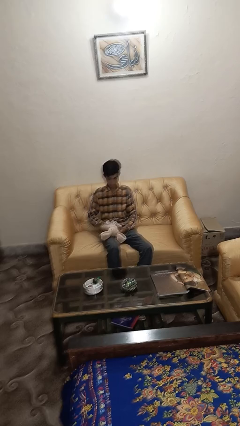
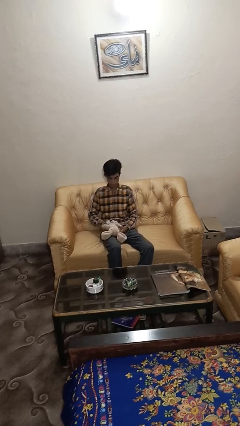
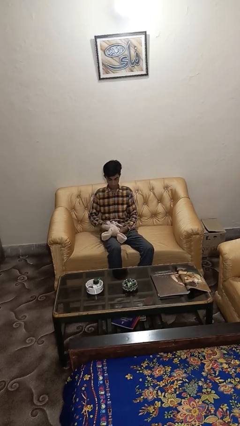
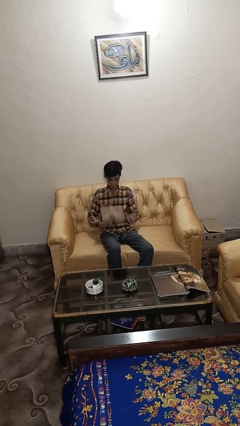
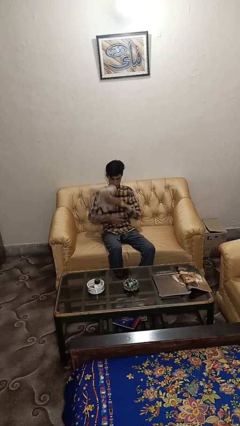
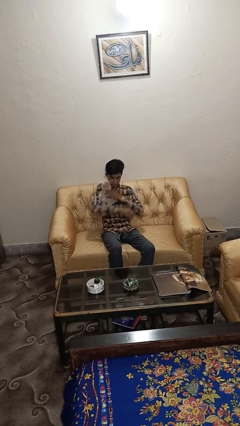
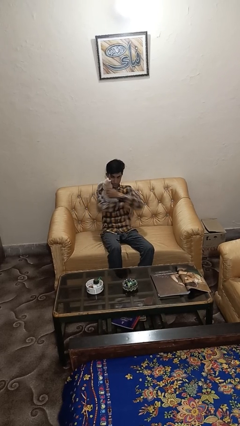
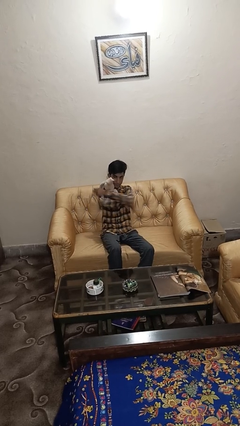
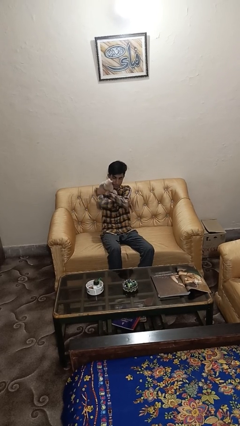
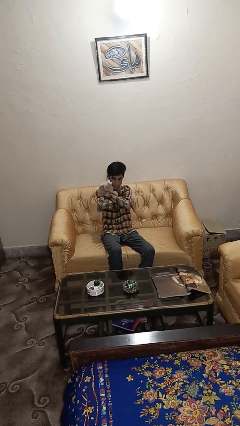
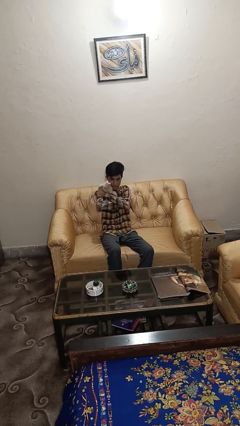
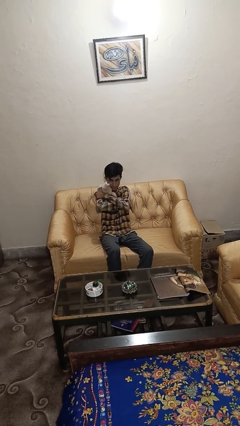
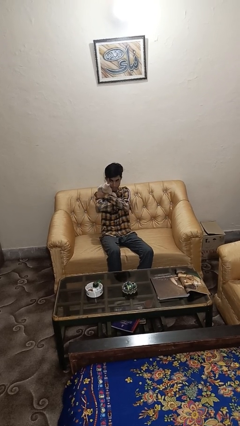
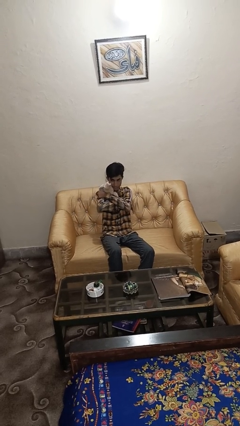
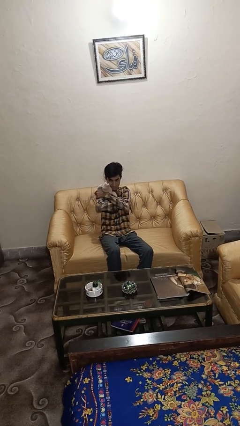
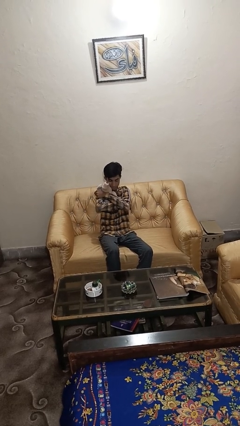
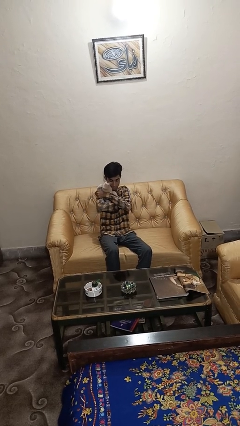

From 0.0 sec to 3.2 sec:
person hugs stuffed animal

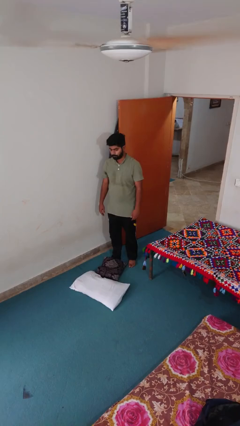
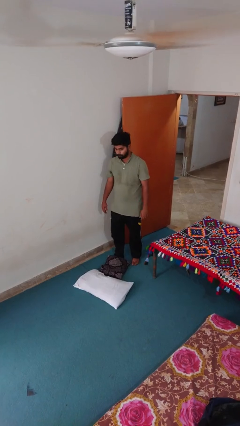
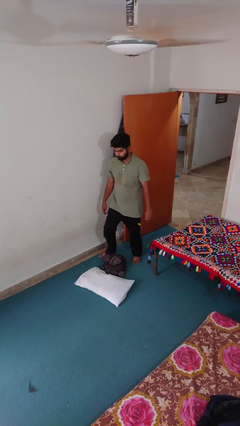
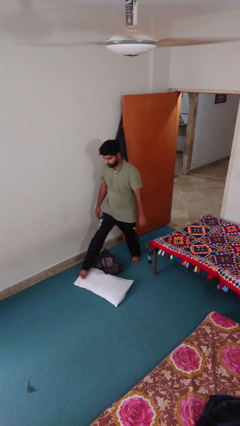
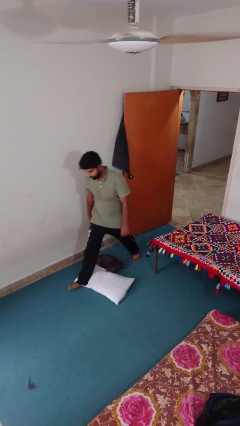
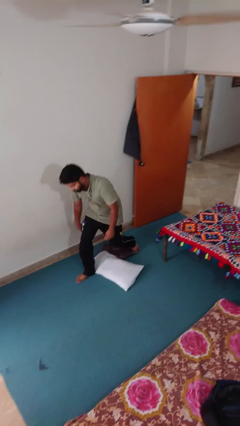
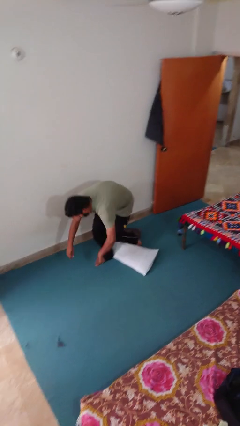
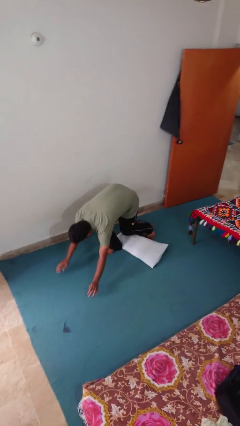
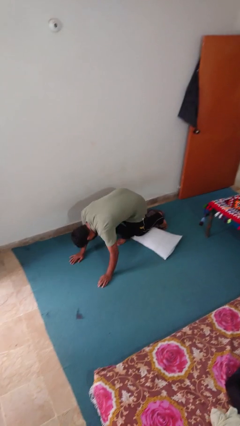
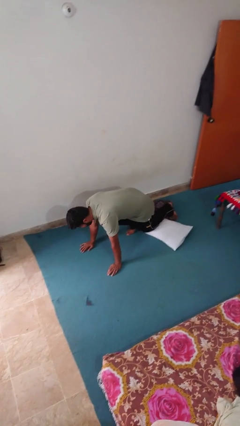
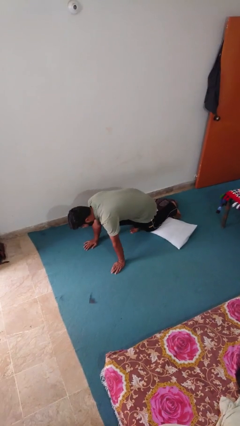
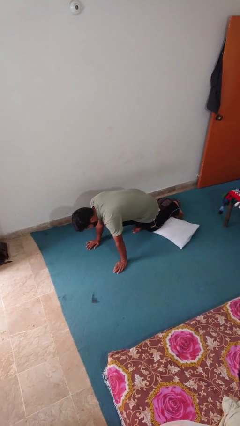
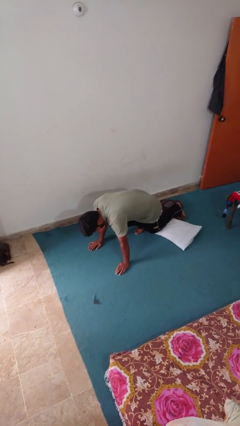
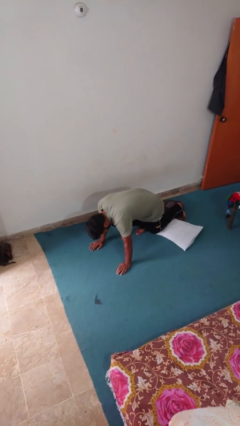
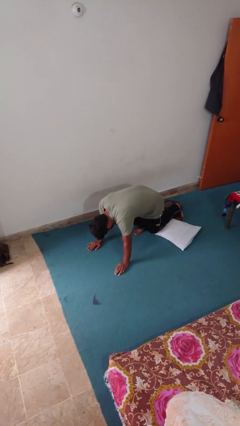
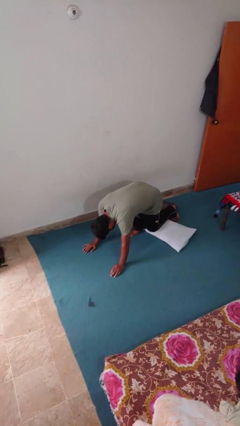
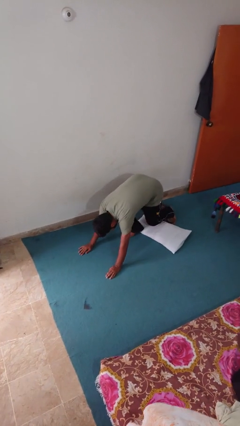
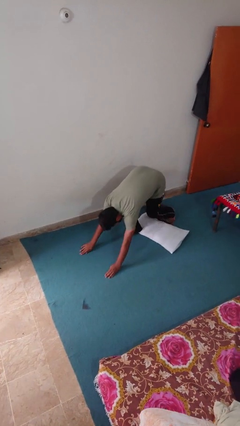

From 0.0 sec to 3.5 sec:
person trips on object on floor

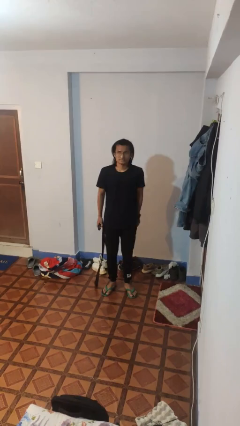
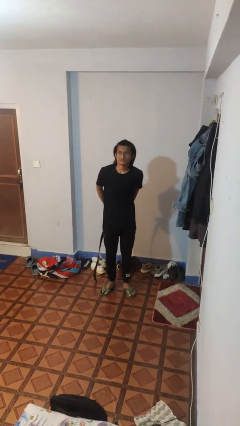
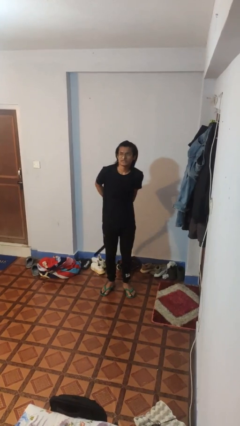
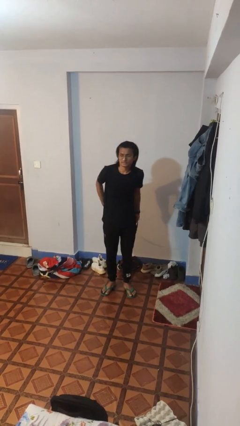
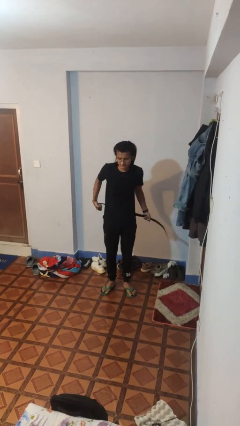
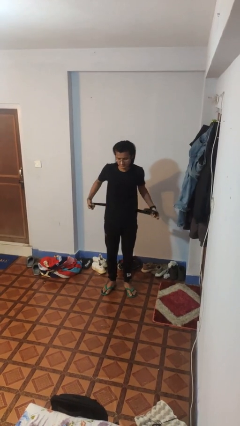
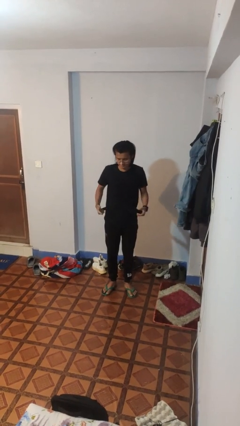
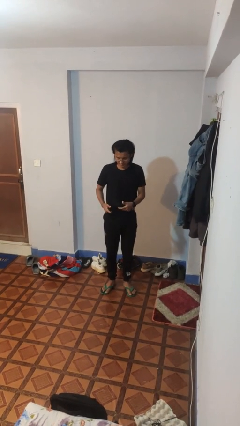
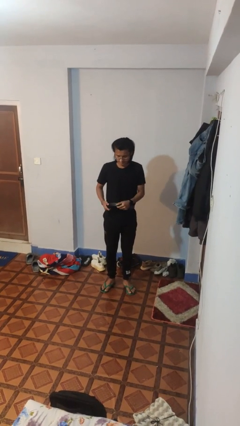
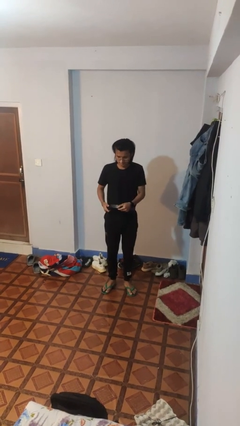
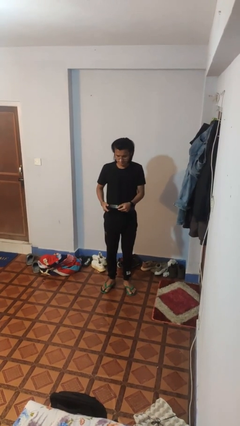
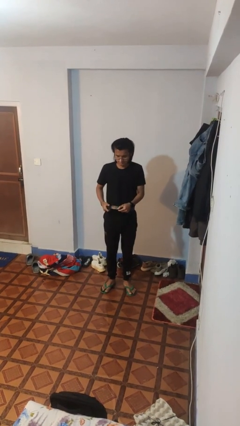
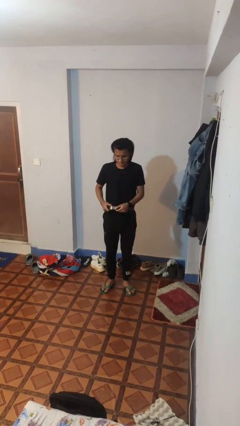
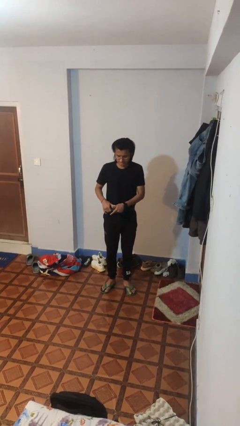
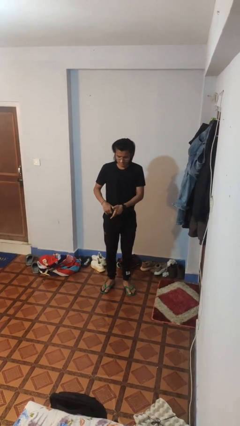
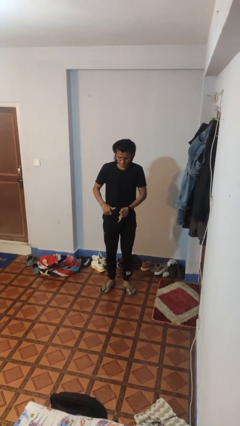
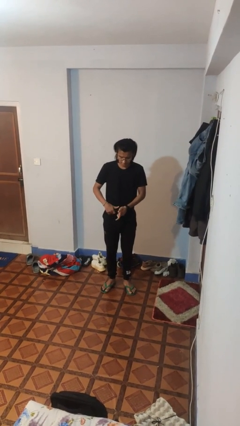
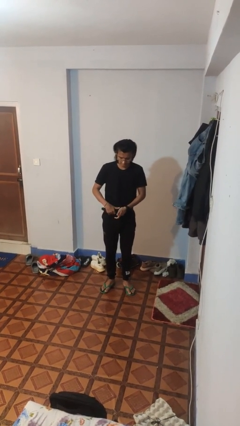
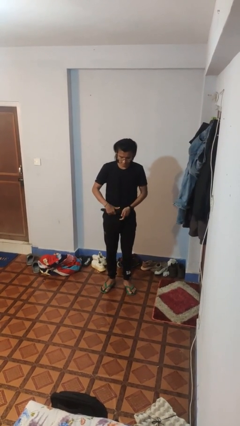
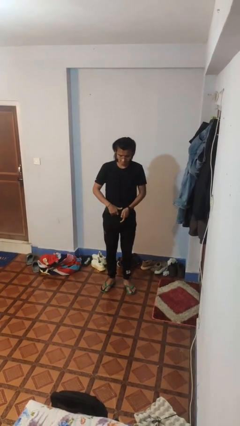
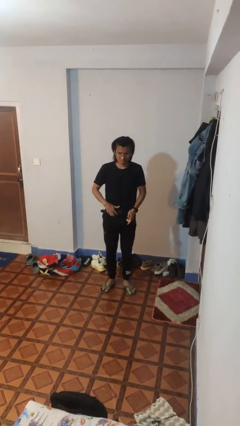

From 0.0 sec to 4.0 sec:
person puts on belt

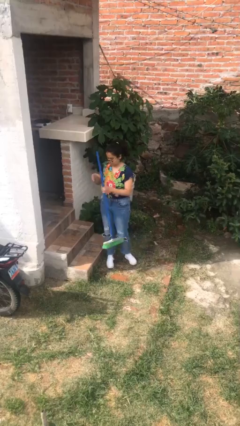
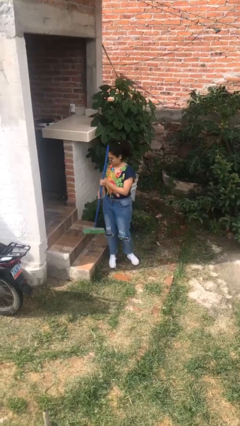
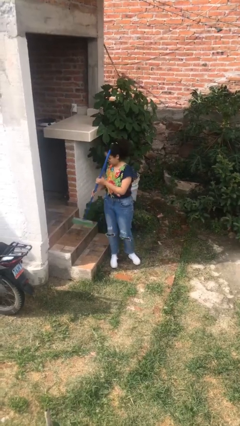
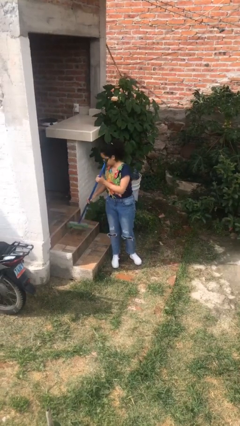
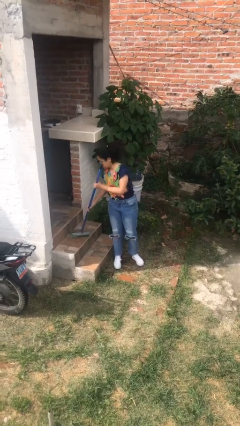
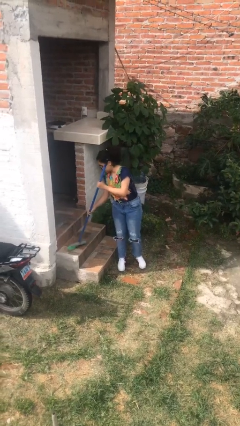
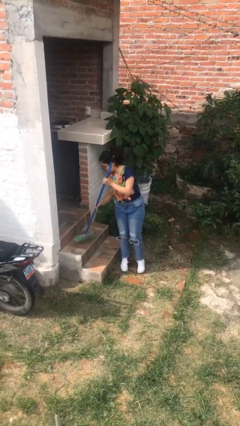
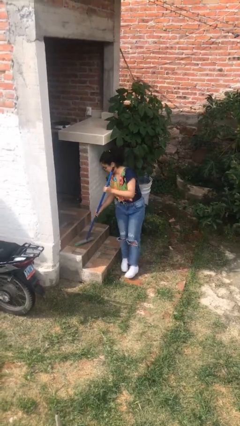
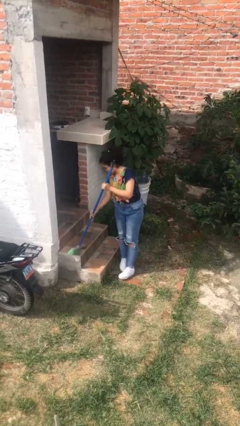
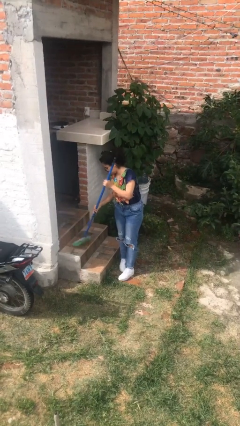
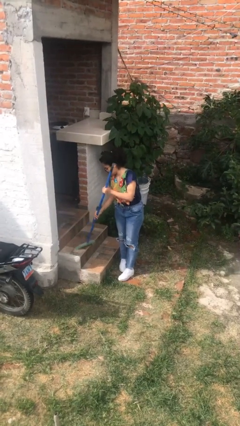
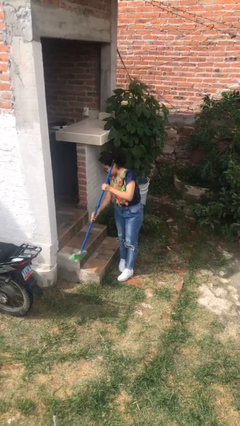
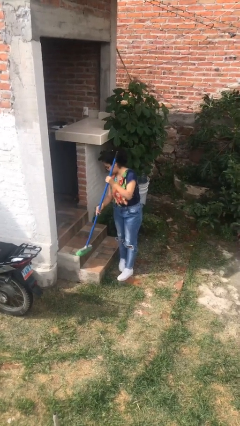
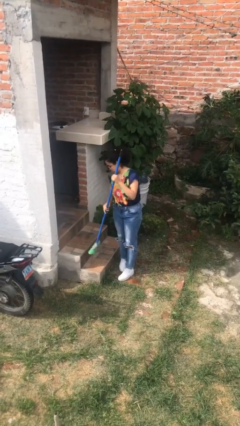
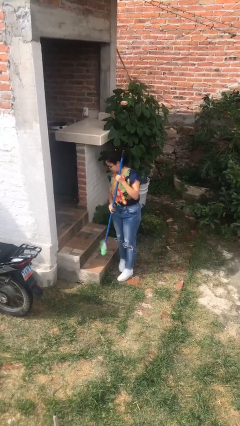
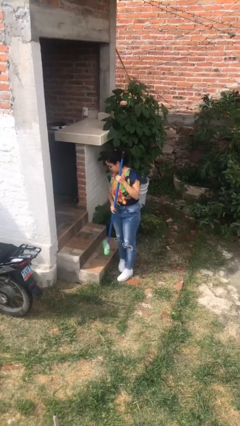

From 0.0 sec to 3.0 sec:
person sweeps floor

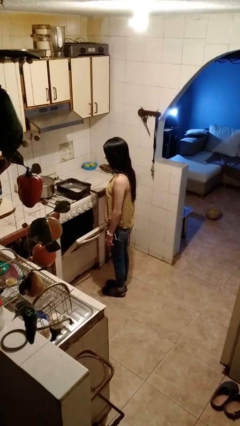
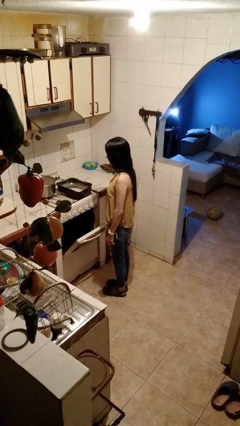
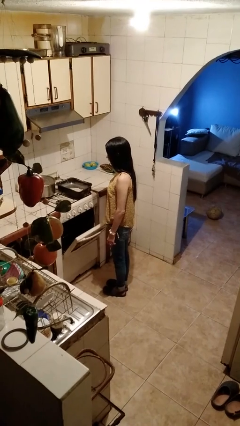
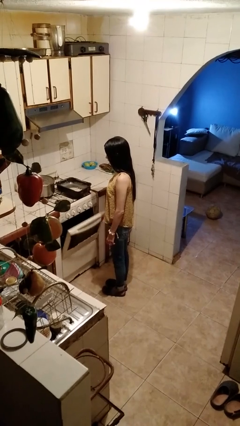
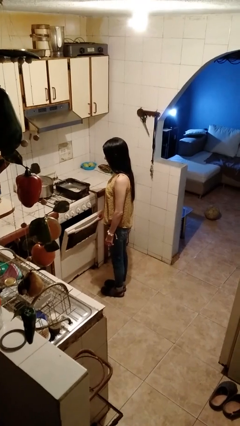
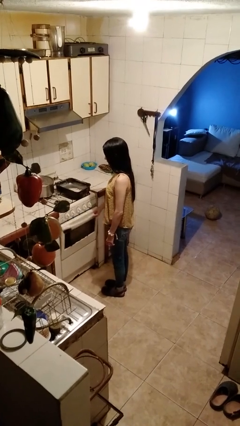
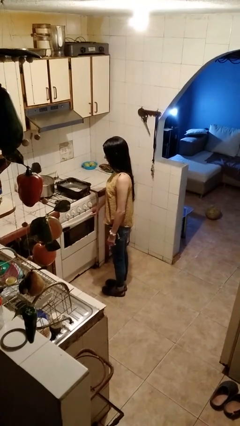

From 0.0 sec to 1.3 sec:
person closes oven door

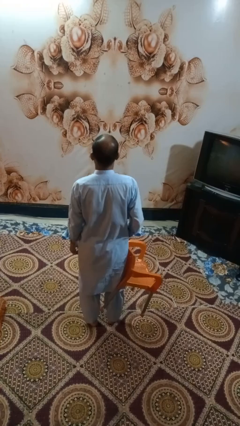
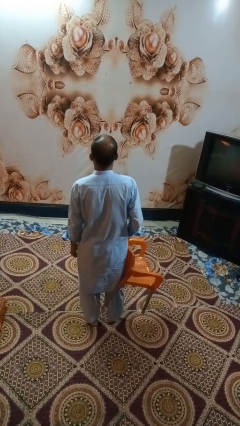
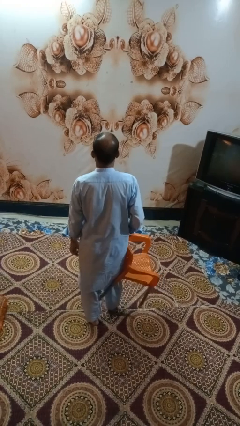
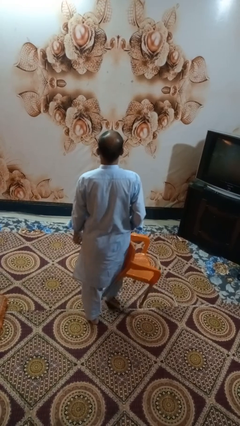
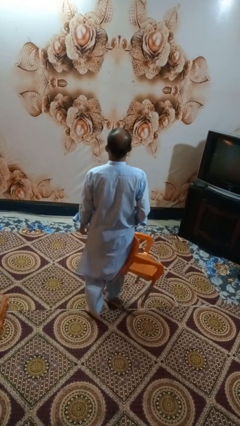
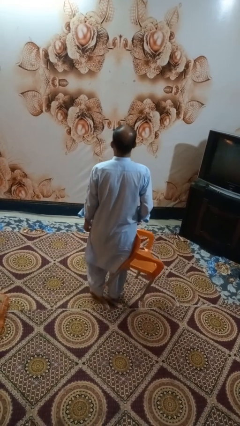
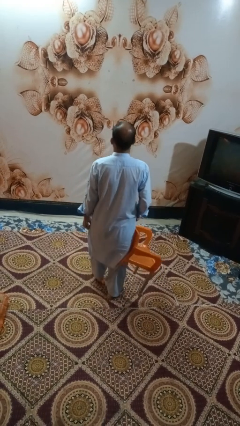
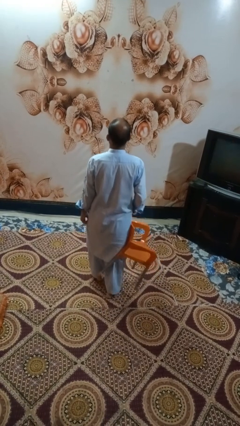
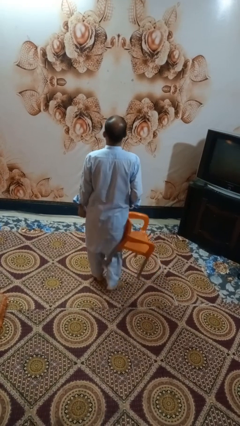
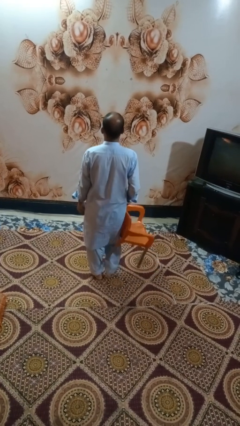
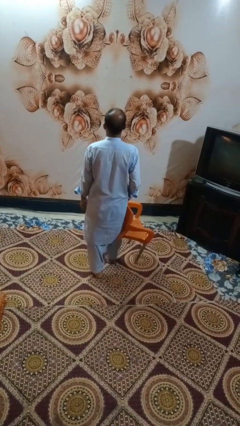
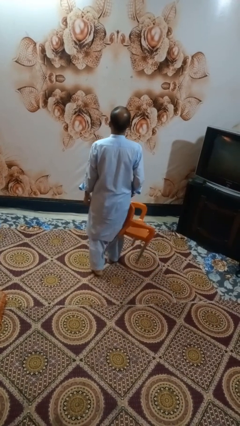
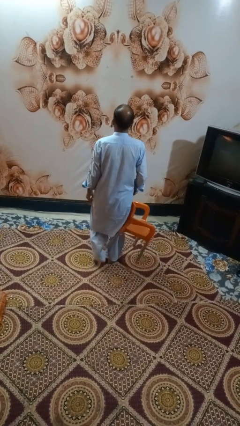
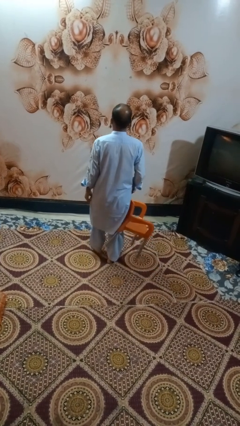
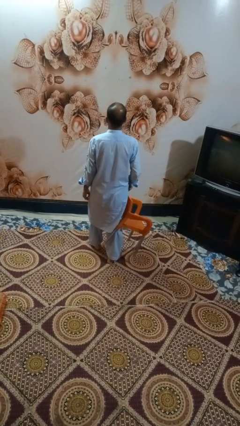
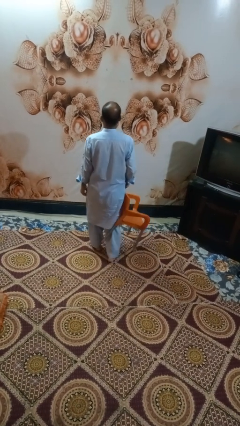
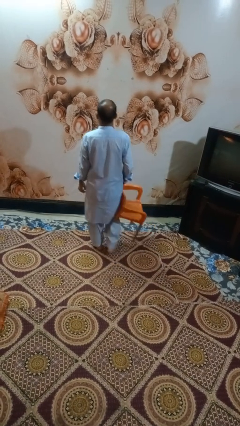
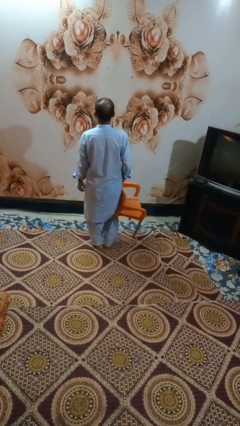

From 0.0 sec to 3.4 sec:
person carries furniture
